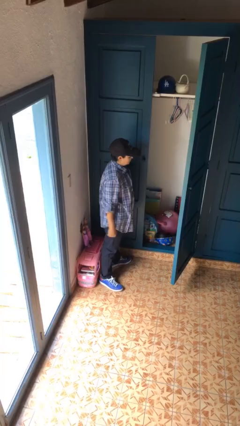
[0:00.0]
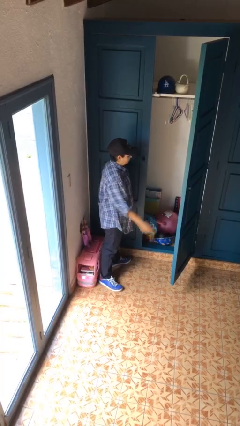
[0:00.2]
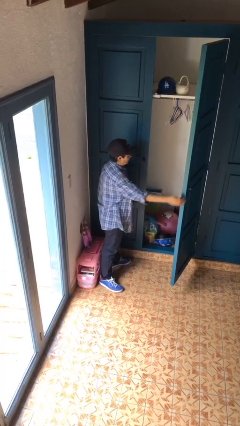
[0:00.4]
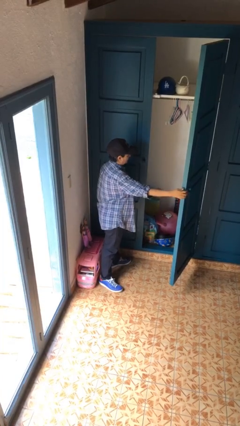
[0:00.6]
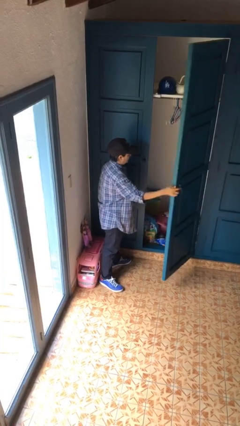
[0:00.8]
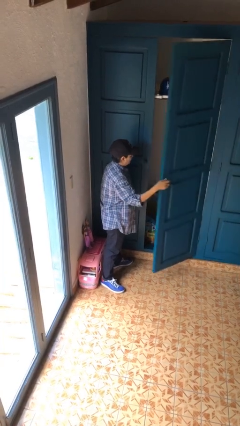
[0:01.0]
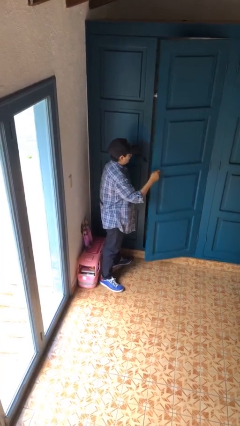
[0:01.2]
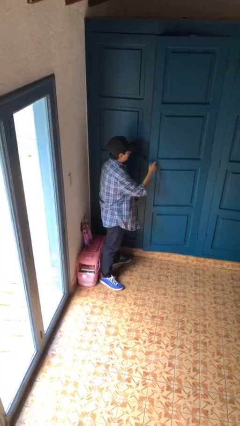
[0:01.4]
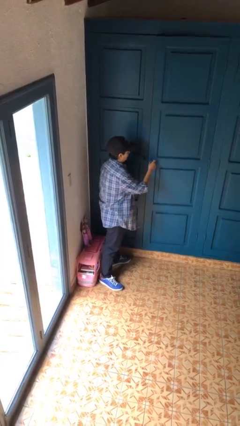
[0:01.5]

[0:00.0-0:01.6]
person closes closet door

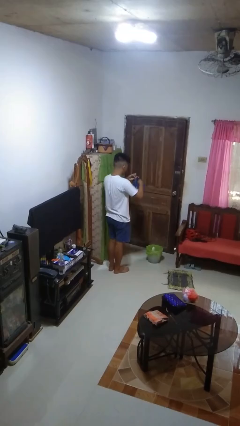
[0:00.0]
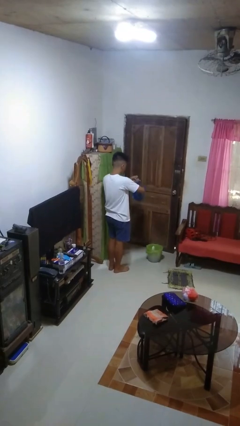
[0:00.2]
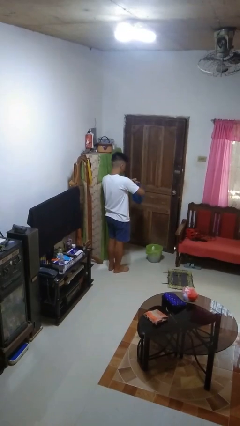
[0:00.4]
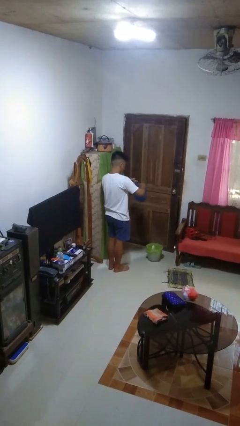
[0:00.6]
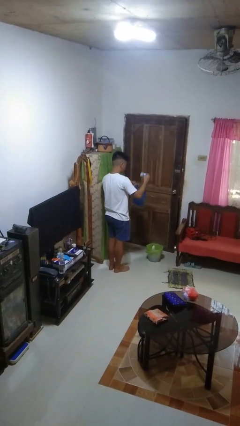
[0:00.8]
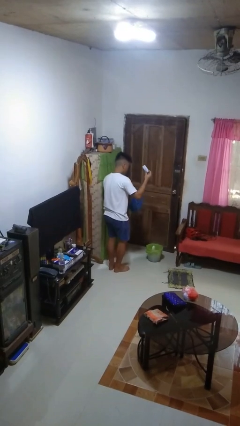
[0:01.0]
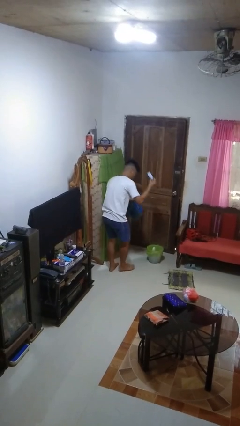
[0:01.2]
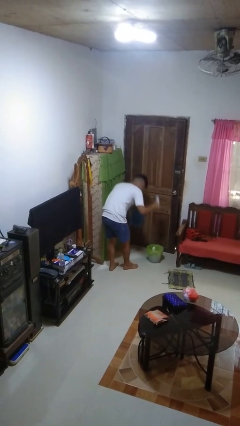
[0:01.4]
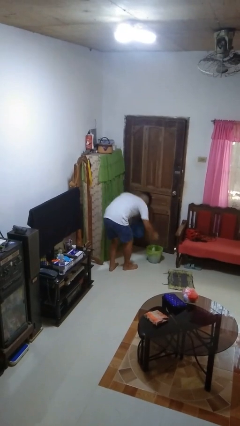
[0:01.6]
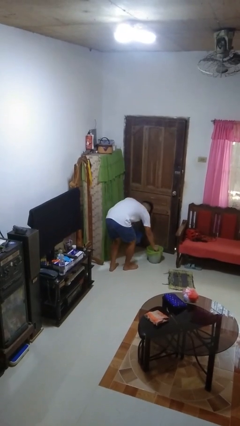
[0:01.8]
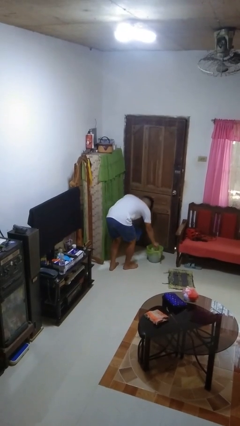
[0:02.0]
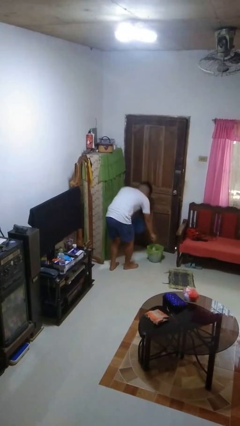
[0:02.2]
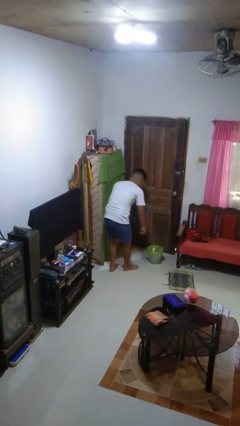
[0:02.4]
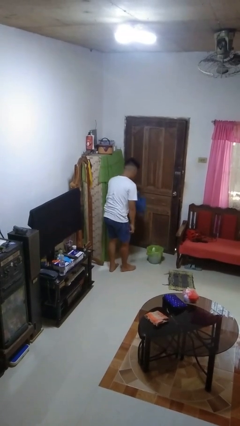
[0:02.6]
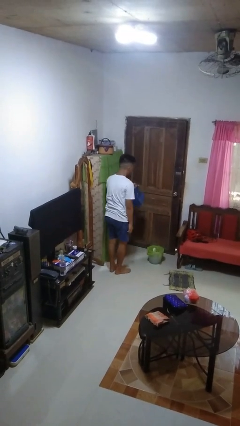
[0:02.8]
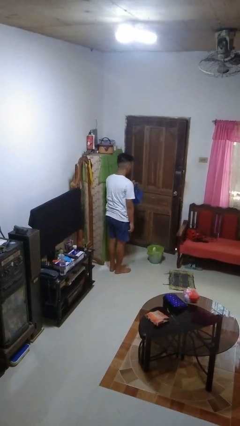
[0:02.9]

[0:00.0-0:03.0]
person discards trash

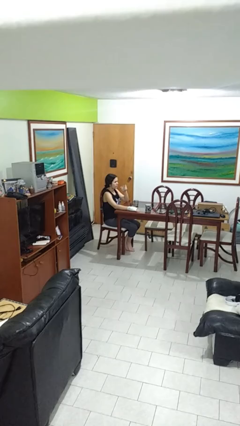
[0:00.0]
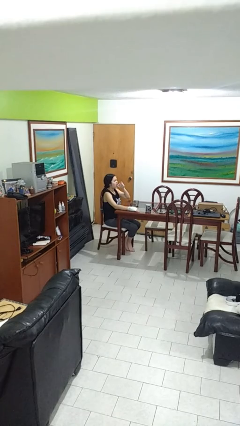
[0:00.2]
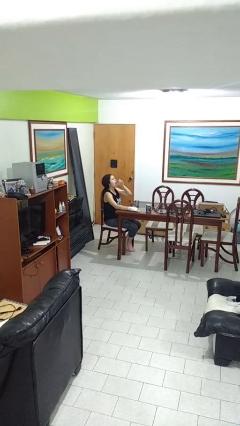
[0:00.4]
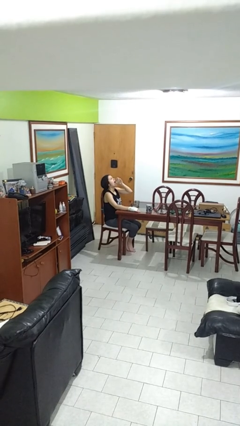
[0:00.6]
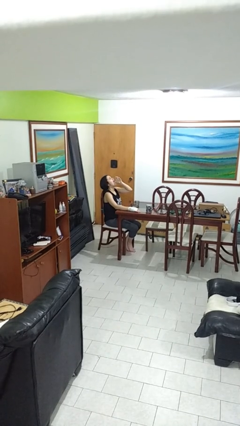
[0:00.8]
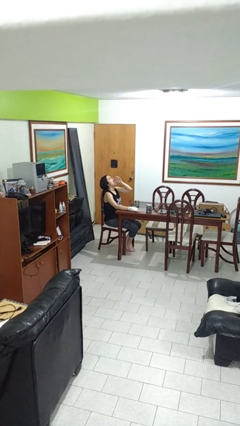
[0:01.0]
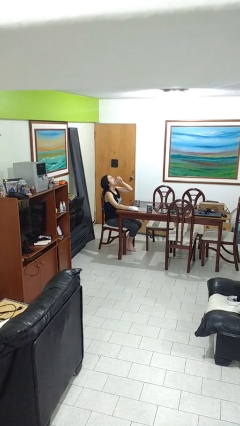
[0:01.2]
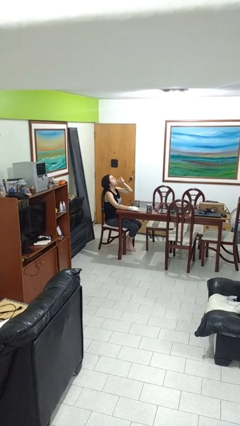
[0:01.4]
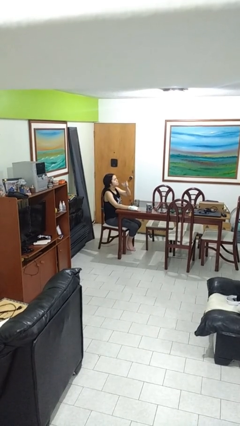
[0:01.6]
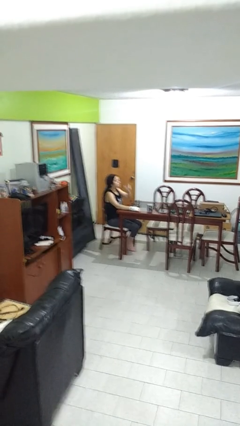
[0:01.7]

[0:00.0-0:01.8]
person drinks from shotglass

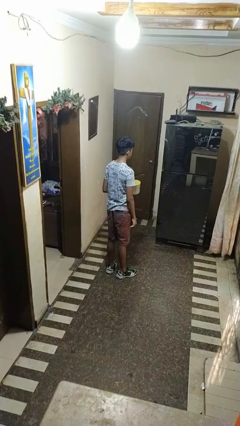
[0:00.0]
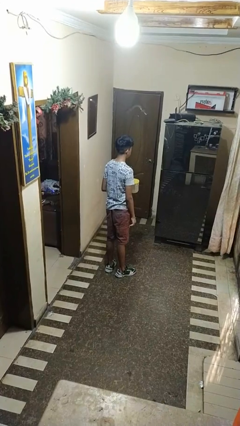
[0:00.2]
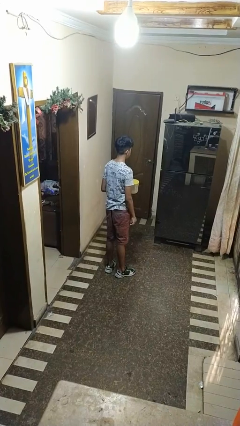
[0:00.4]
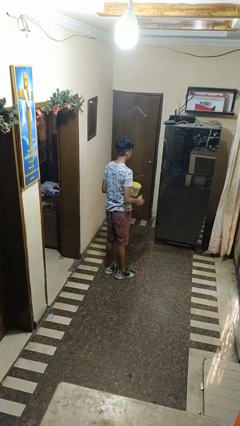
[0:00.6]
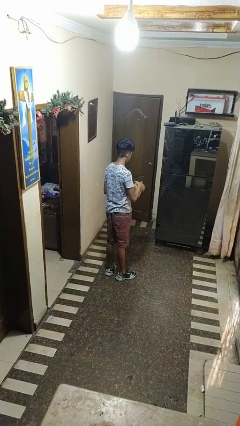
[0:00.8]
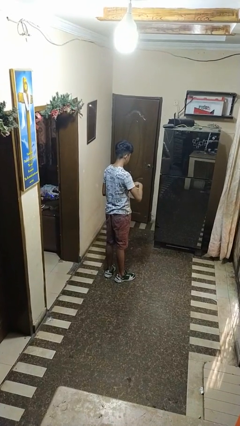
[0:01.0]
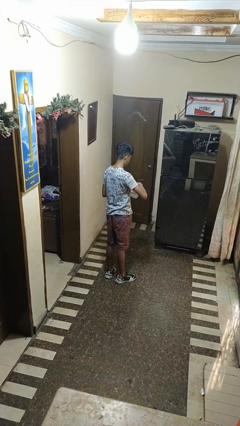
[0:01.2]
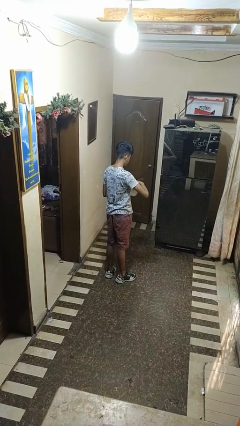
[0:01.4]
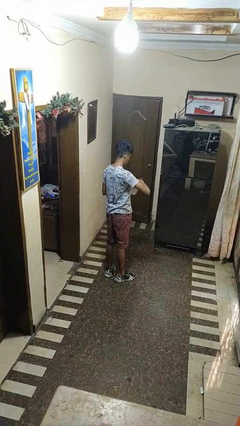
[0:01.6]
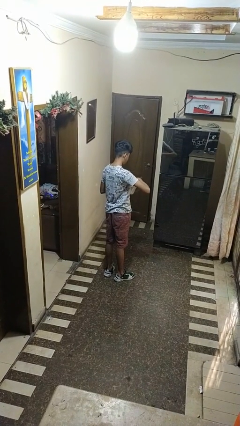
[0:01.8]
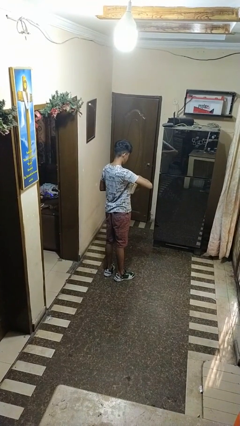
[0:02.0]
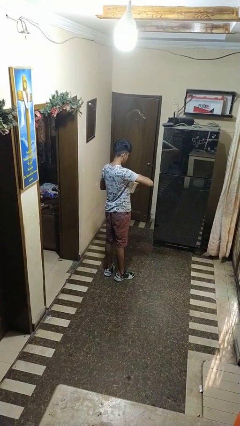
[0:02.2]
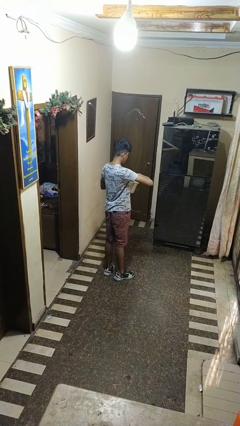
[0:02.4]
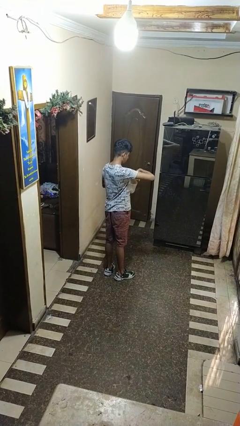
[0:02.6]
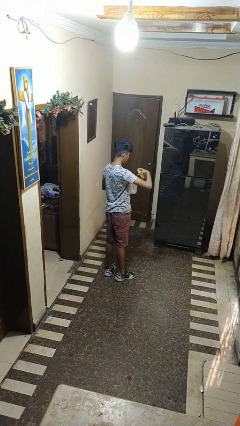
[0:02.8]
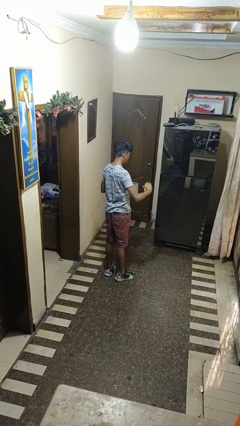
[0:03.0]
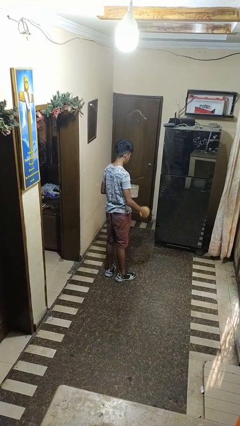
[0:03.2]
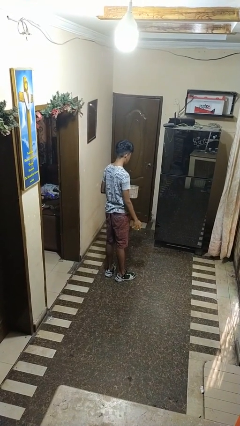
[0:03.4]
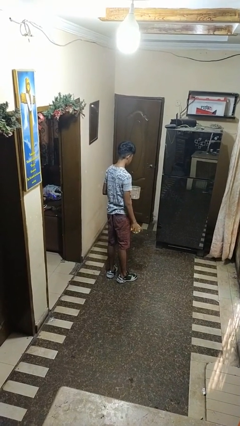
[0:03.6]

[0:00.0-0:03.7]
person opens jar

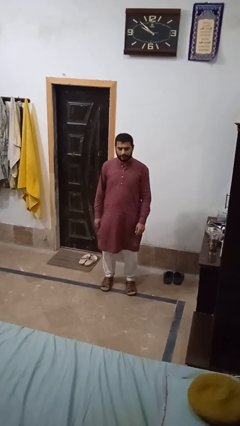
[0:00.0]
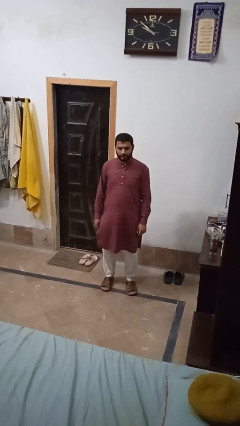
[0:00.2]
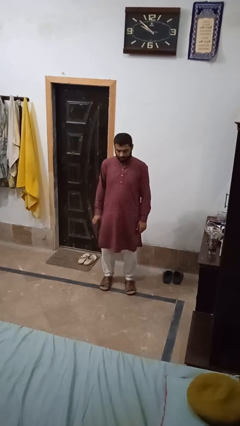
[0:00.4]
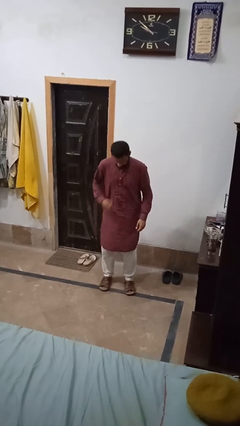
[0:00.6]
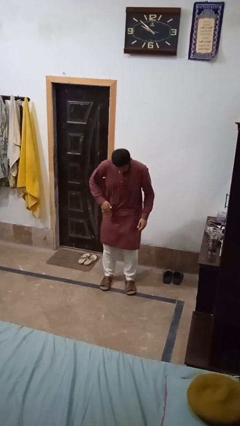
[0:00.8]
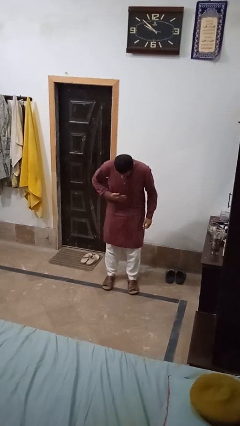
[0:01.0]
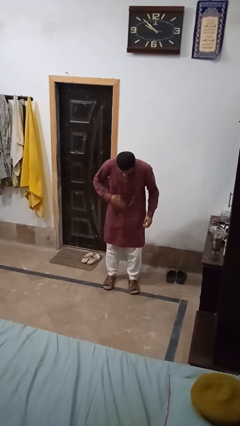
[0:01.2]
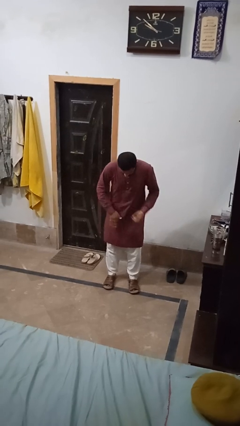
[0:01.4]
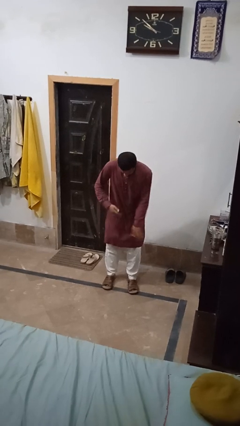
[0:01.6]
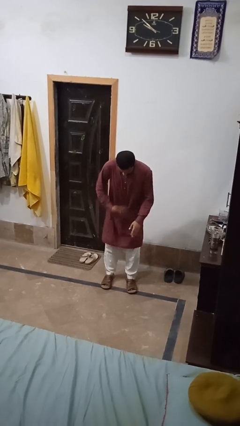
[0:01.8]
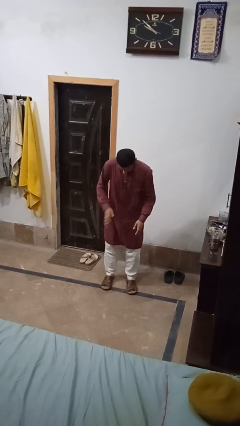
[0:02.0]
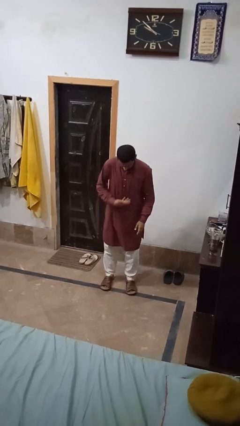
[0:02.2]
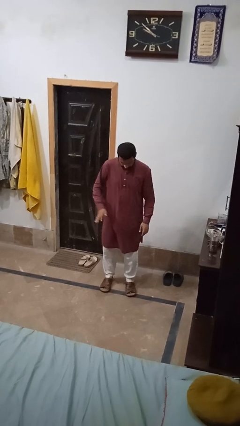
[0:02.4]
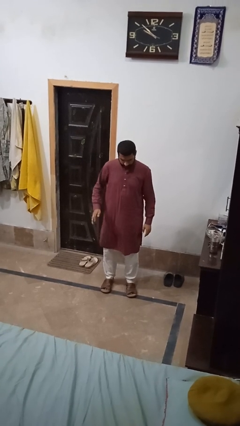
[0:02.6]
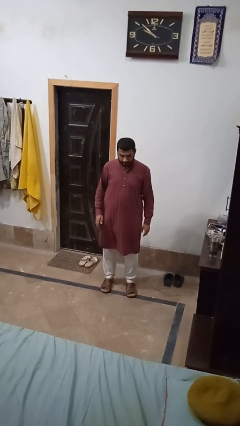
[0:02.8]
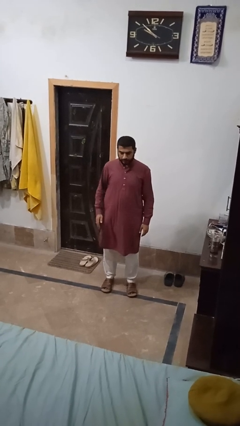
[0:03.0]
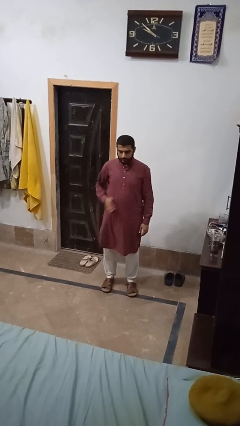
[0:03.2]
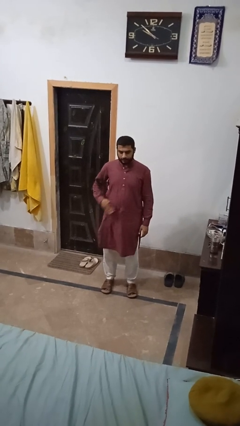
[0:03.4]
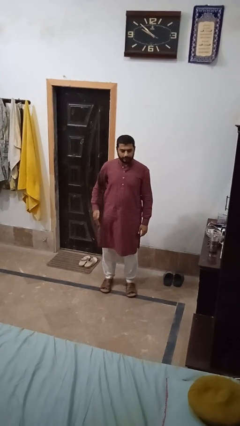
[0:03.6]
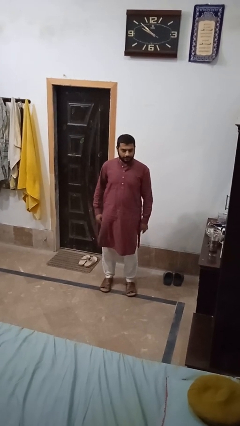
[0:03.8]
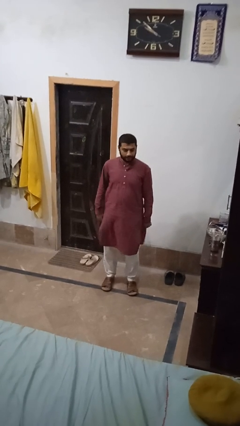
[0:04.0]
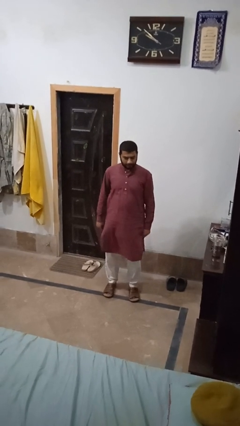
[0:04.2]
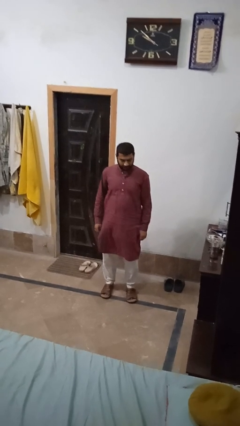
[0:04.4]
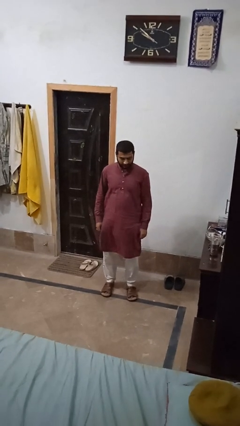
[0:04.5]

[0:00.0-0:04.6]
person swats bug

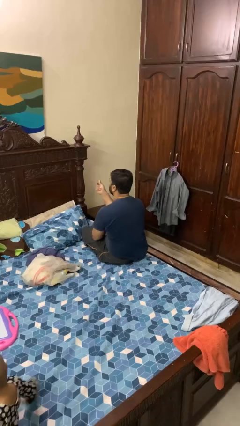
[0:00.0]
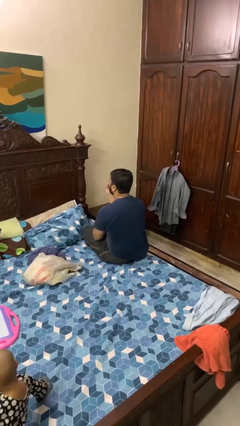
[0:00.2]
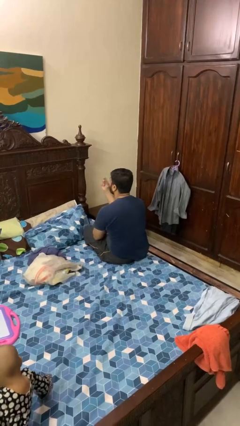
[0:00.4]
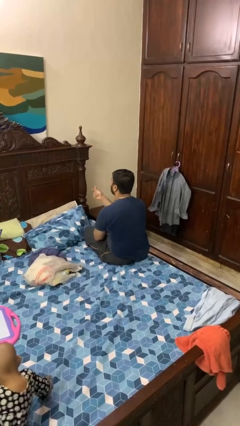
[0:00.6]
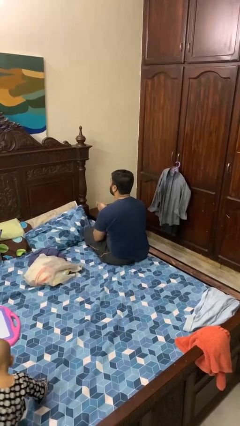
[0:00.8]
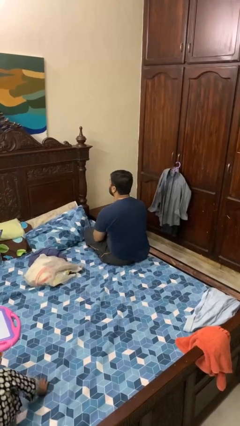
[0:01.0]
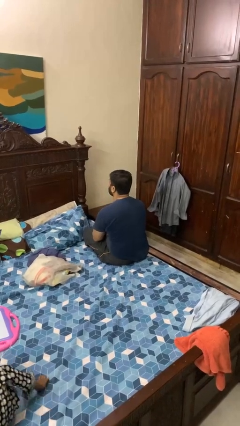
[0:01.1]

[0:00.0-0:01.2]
person snaps fingers

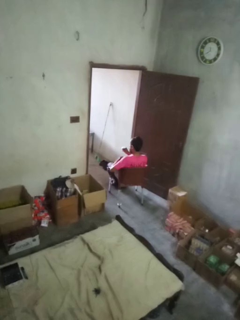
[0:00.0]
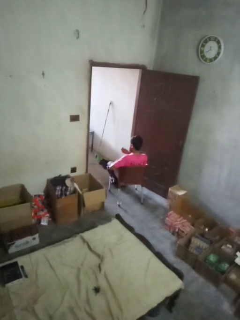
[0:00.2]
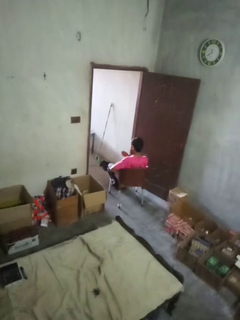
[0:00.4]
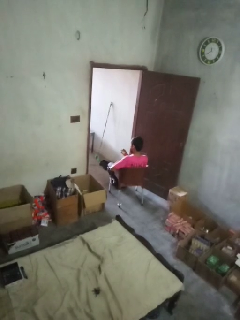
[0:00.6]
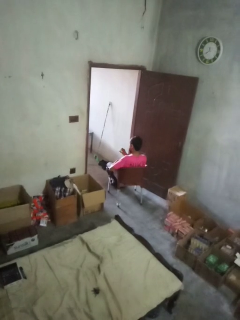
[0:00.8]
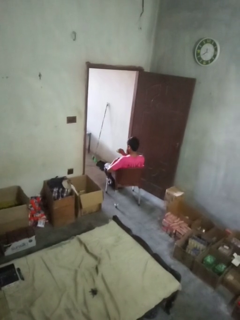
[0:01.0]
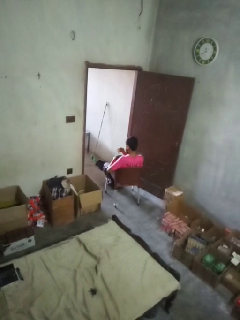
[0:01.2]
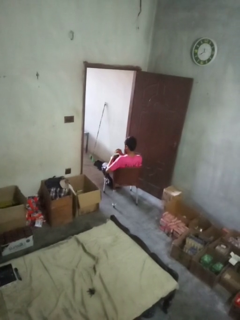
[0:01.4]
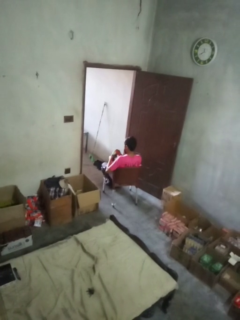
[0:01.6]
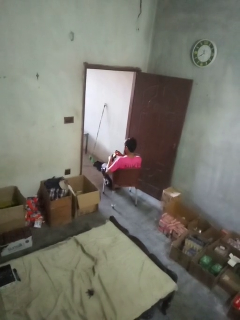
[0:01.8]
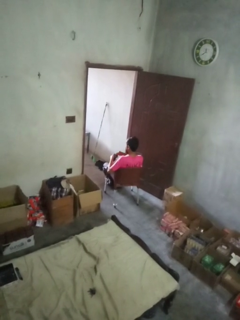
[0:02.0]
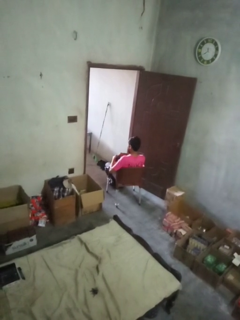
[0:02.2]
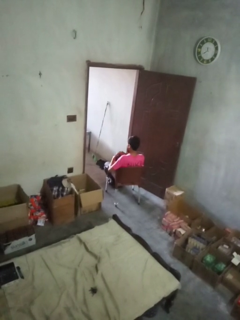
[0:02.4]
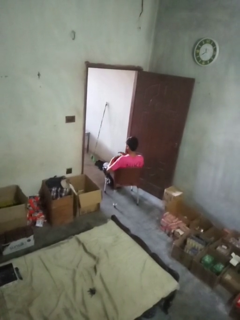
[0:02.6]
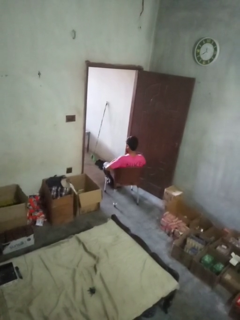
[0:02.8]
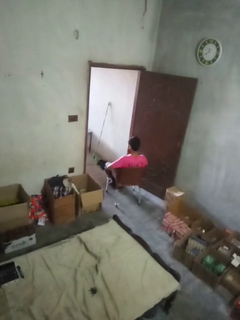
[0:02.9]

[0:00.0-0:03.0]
person puts object into purse
